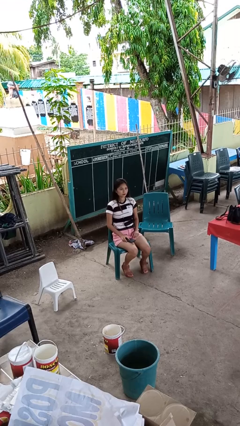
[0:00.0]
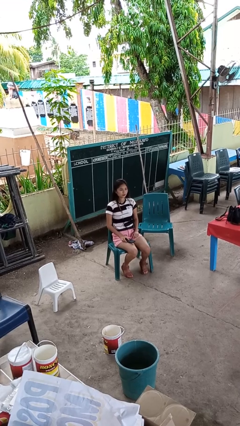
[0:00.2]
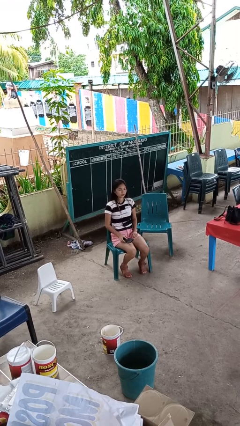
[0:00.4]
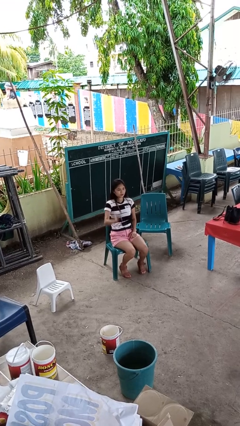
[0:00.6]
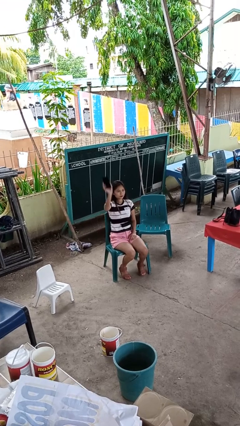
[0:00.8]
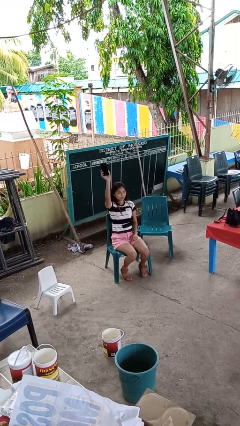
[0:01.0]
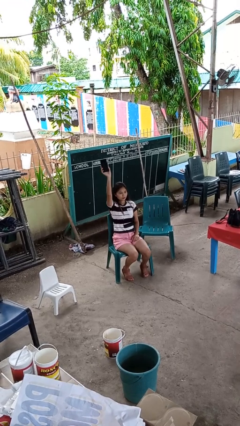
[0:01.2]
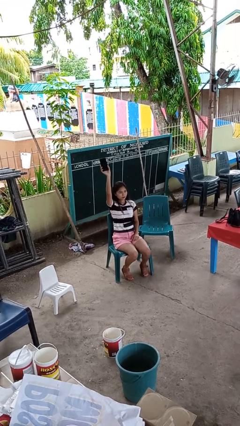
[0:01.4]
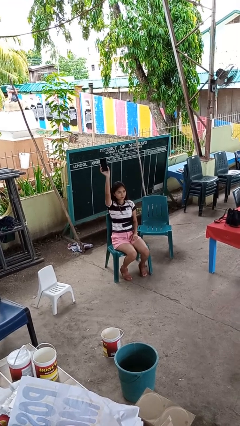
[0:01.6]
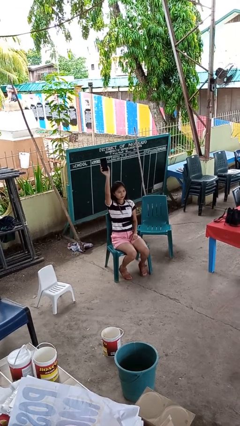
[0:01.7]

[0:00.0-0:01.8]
person holds object above head

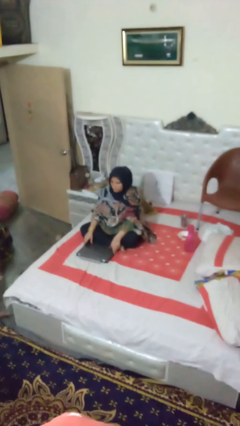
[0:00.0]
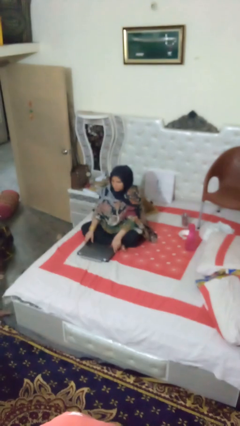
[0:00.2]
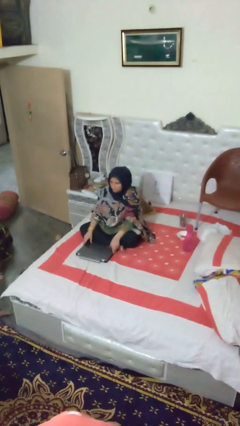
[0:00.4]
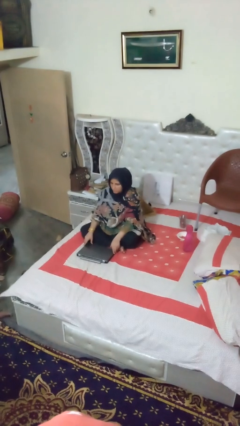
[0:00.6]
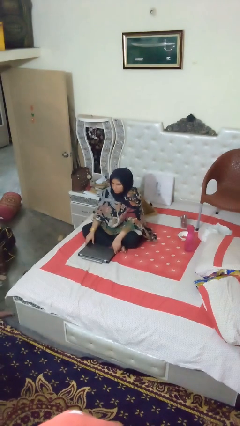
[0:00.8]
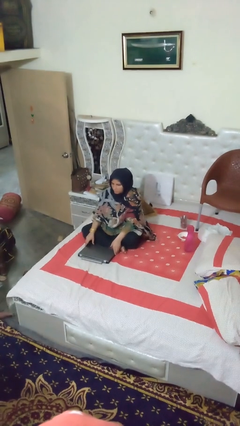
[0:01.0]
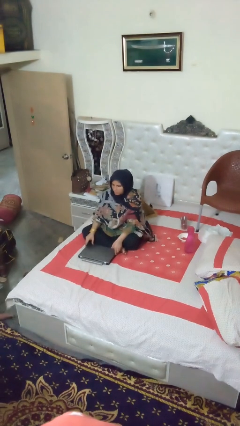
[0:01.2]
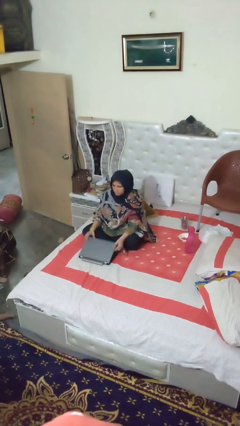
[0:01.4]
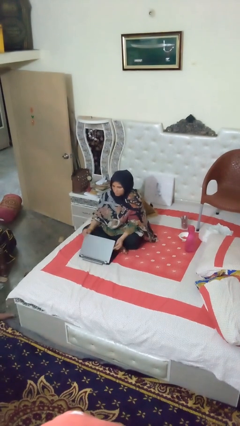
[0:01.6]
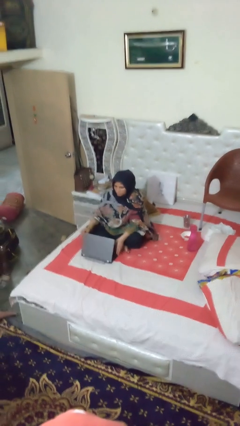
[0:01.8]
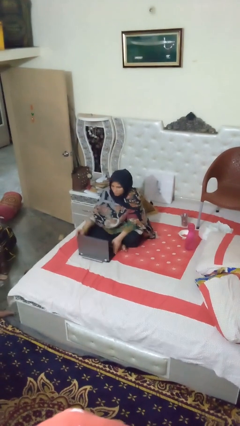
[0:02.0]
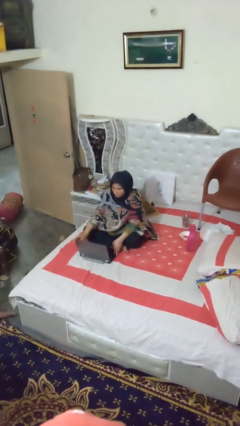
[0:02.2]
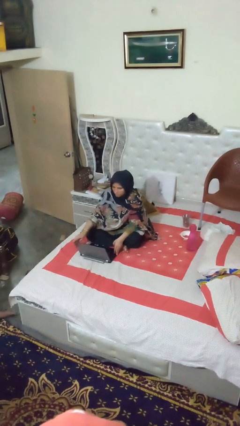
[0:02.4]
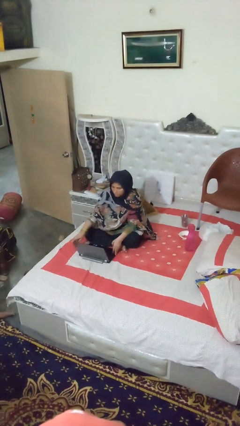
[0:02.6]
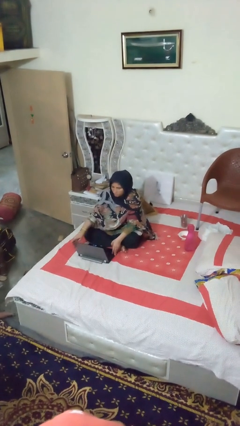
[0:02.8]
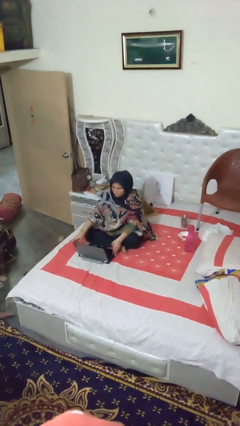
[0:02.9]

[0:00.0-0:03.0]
person opens laptop

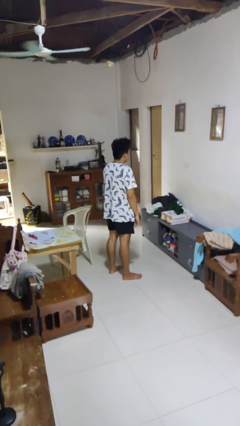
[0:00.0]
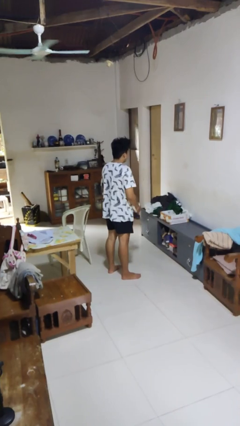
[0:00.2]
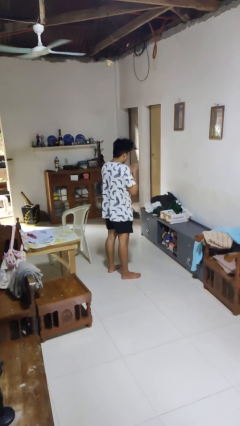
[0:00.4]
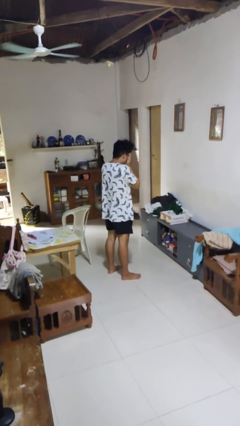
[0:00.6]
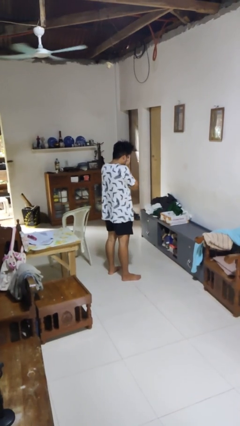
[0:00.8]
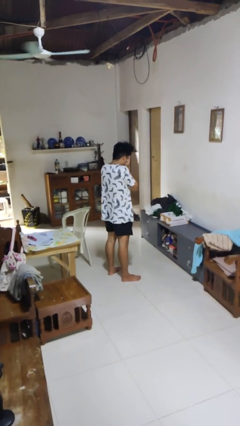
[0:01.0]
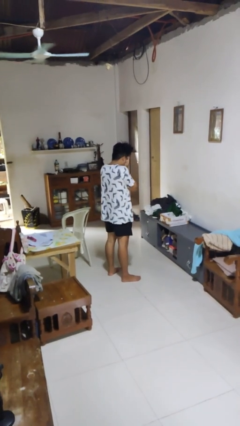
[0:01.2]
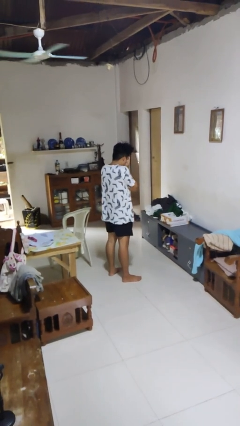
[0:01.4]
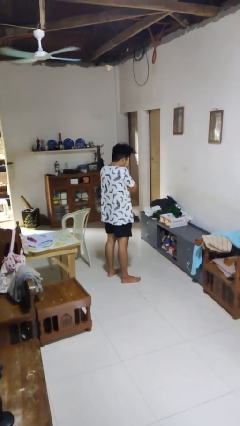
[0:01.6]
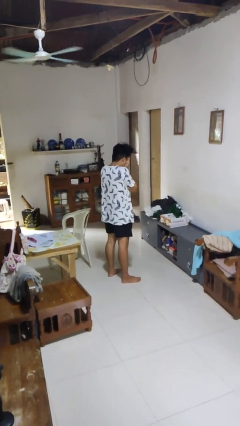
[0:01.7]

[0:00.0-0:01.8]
person covers face with hands

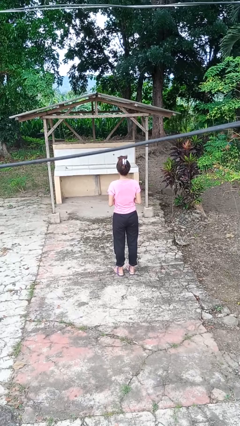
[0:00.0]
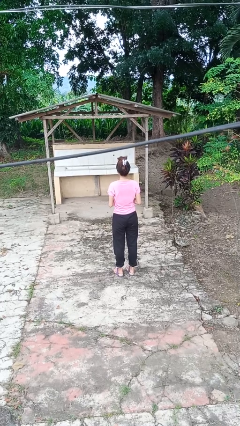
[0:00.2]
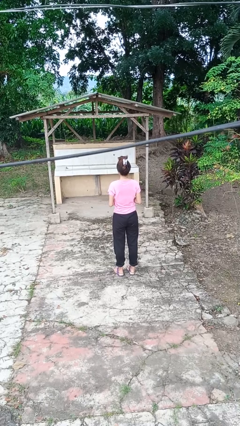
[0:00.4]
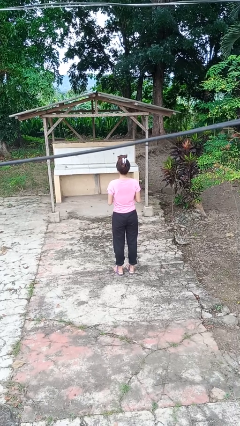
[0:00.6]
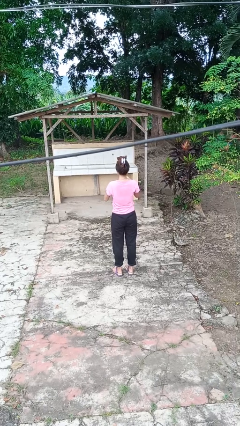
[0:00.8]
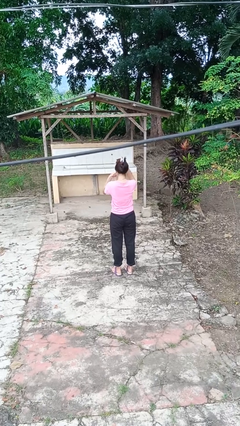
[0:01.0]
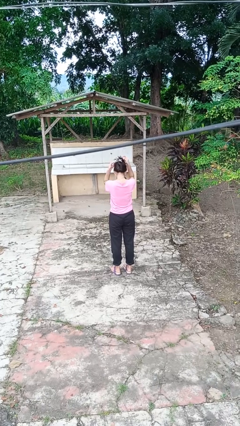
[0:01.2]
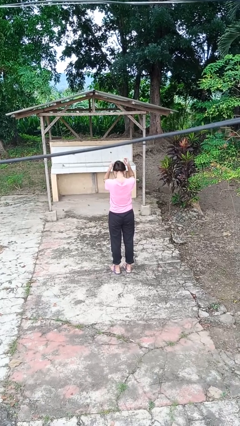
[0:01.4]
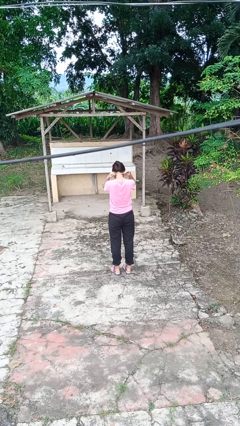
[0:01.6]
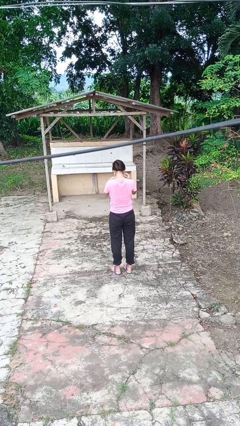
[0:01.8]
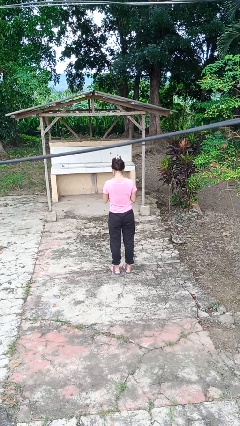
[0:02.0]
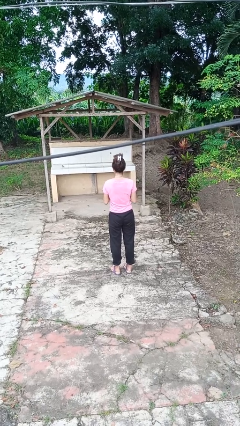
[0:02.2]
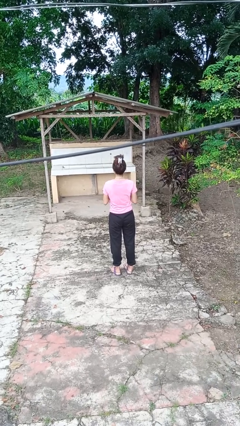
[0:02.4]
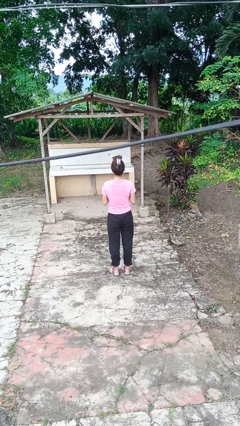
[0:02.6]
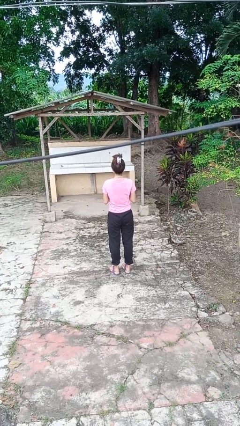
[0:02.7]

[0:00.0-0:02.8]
person puts on necklace

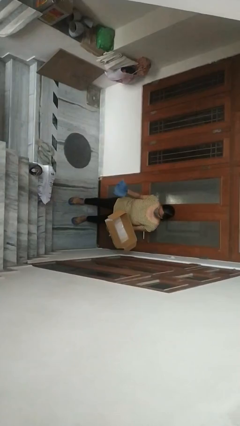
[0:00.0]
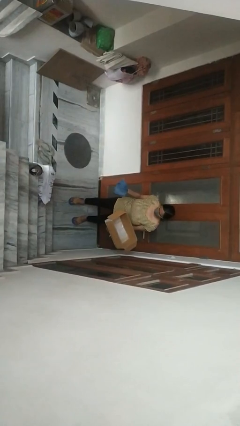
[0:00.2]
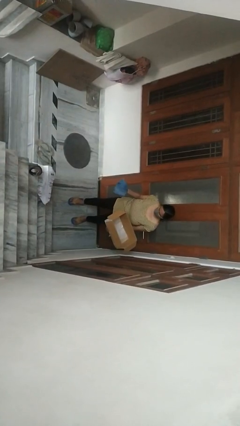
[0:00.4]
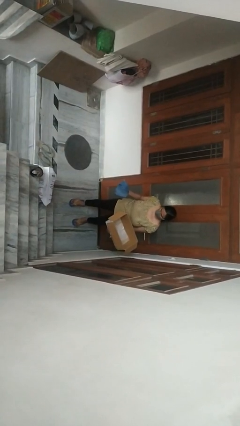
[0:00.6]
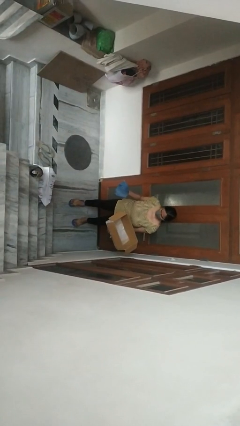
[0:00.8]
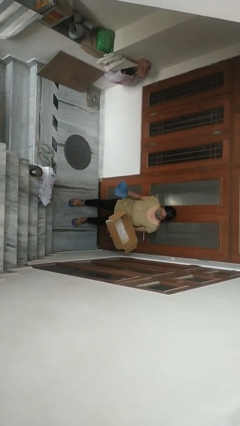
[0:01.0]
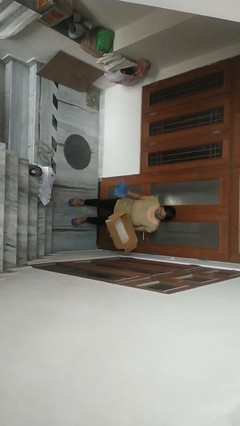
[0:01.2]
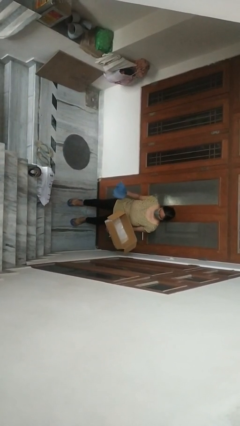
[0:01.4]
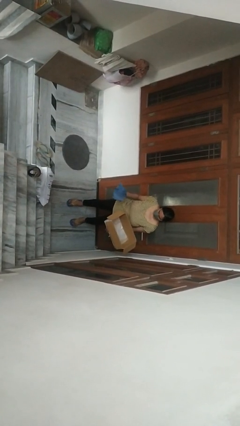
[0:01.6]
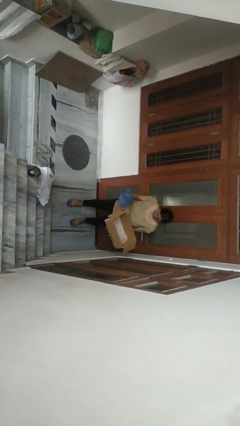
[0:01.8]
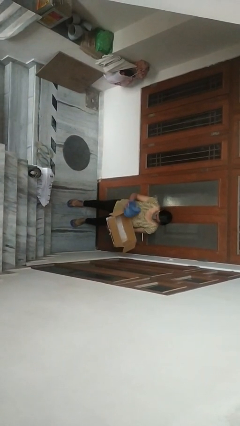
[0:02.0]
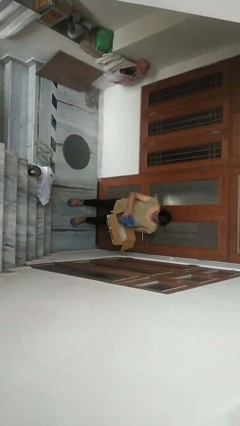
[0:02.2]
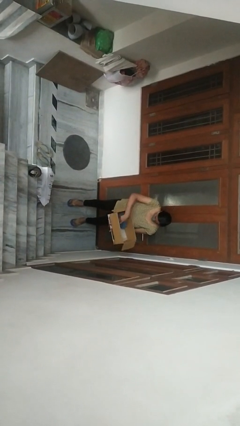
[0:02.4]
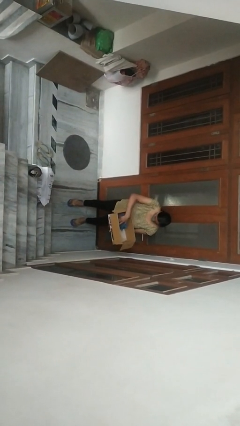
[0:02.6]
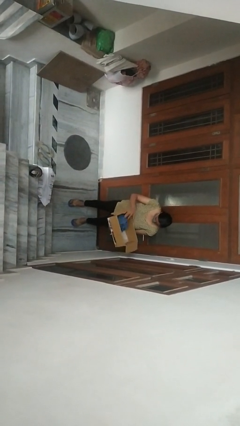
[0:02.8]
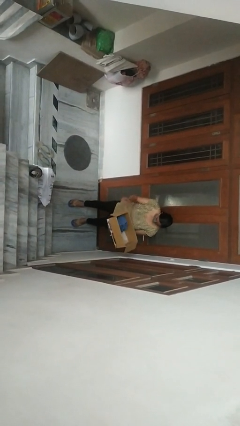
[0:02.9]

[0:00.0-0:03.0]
person puts object into box

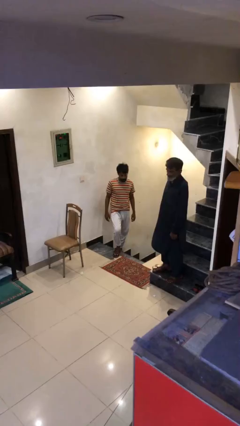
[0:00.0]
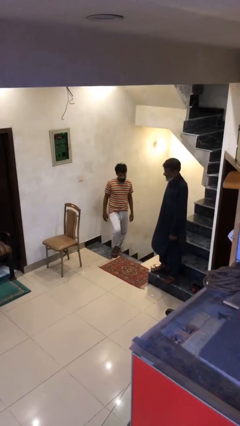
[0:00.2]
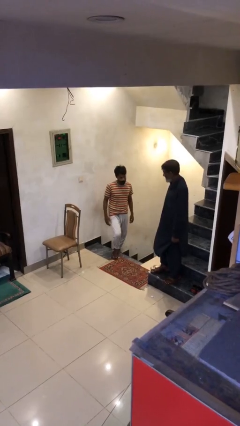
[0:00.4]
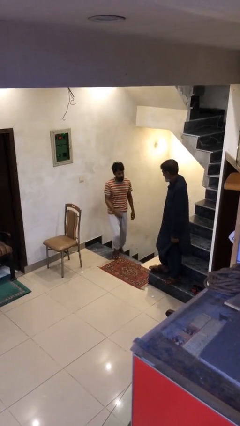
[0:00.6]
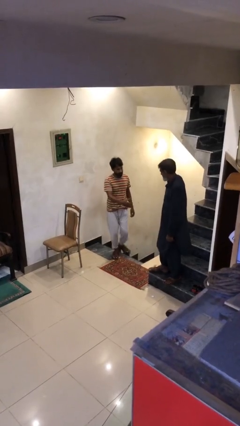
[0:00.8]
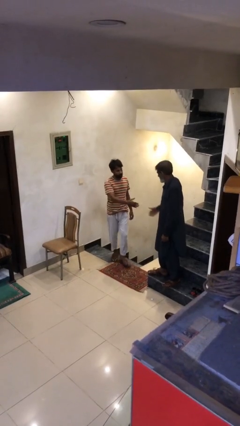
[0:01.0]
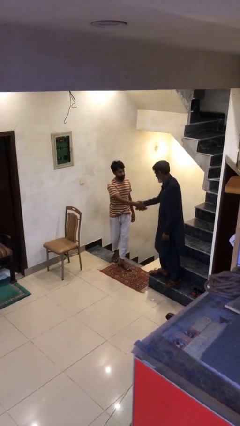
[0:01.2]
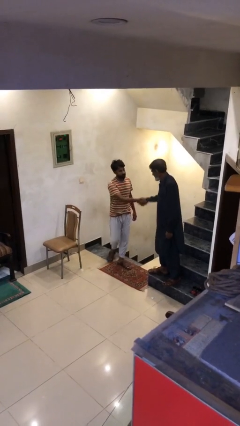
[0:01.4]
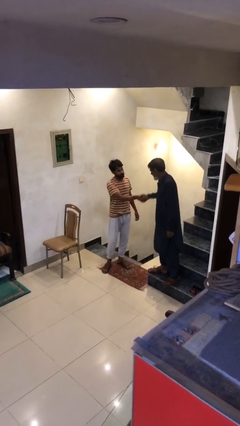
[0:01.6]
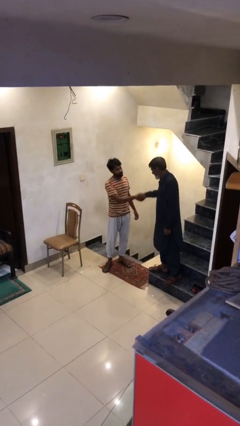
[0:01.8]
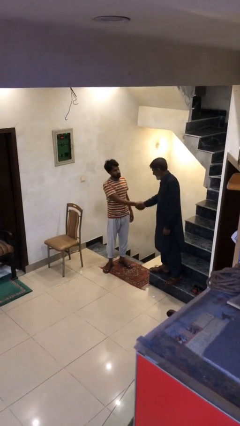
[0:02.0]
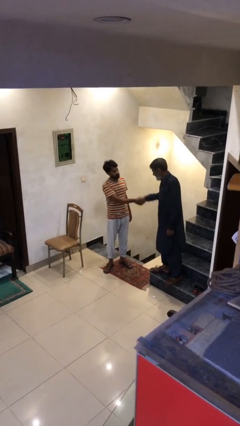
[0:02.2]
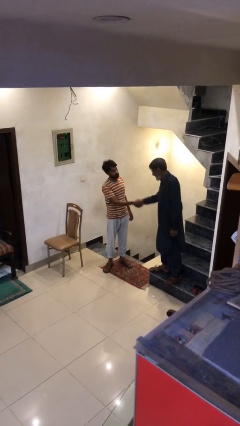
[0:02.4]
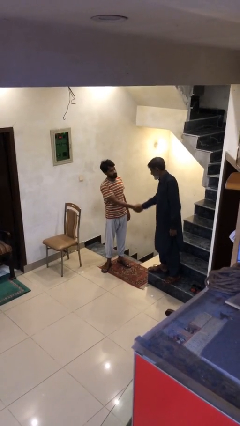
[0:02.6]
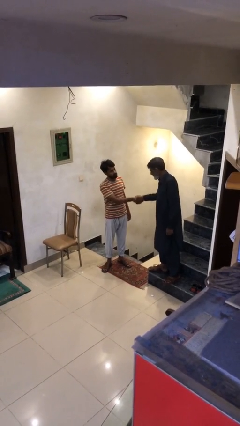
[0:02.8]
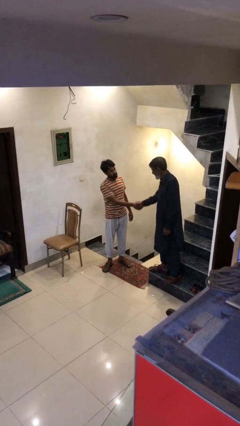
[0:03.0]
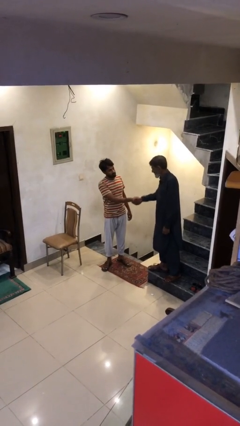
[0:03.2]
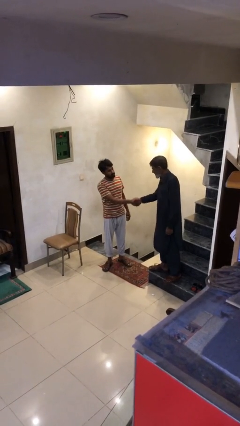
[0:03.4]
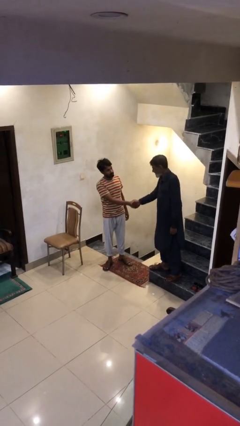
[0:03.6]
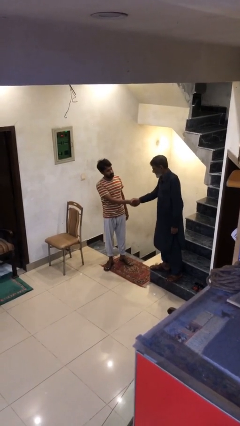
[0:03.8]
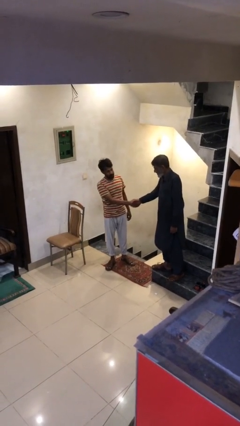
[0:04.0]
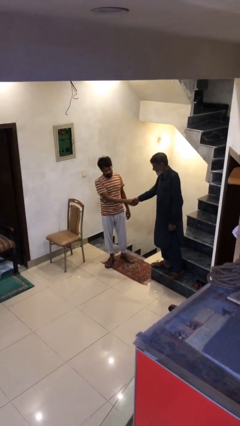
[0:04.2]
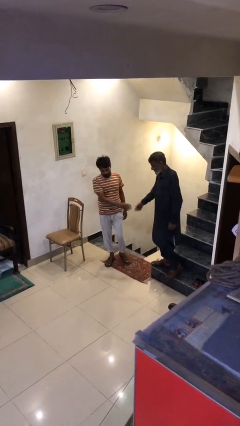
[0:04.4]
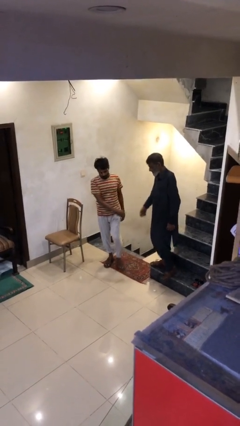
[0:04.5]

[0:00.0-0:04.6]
person shakes hand
